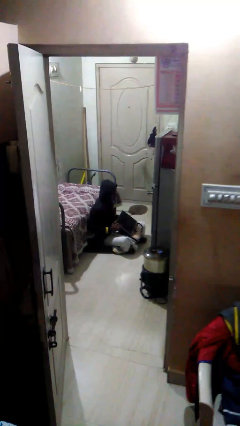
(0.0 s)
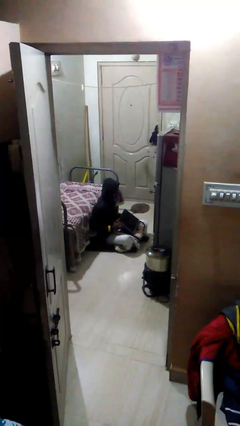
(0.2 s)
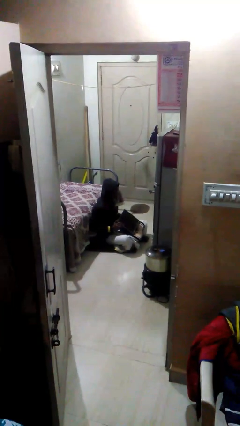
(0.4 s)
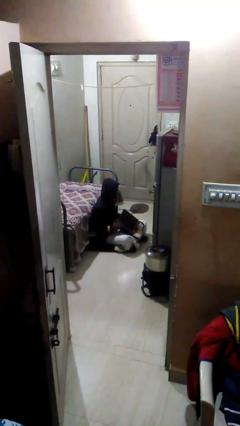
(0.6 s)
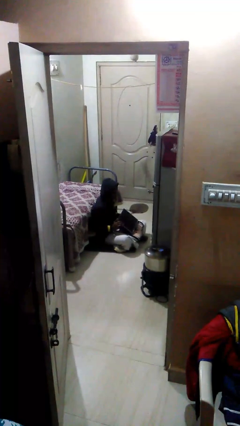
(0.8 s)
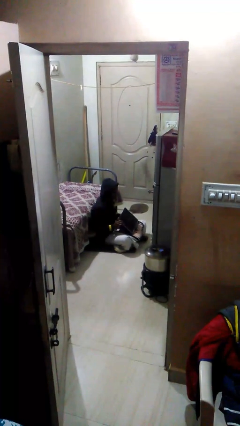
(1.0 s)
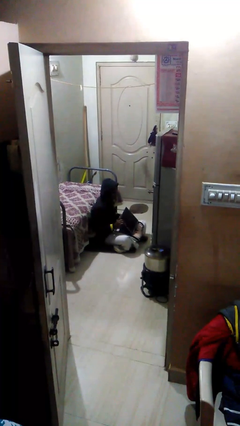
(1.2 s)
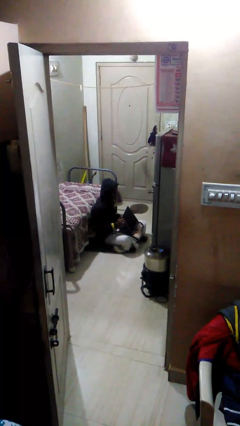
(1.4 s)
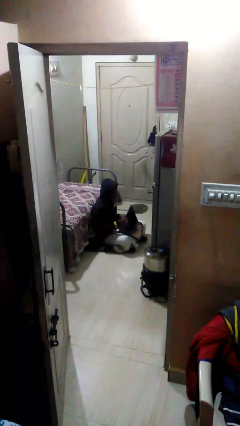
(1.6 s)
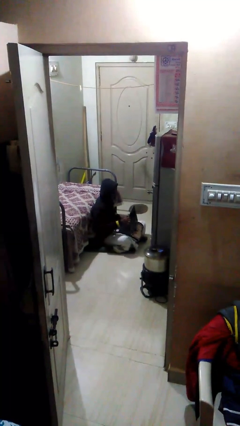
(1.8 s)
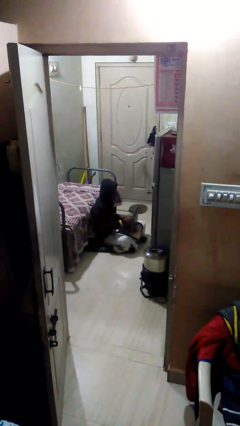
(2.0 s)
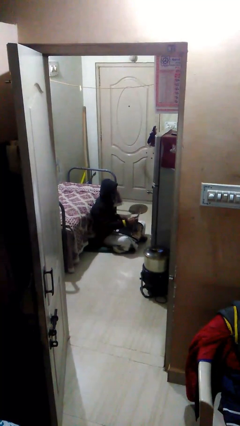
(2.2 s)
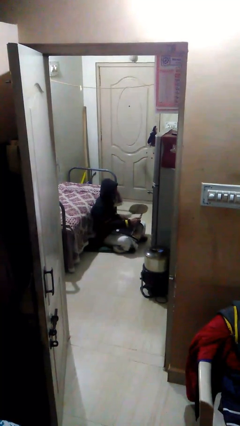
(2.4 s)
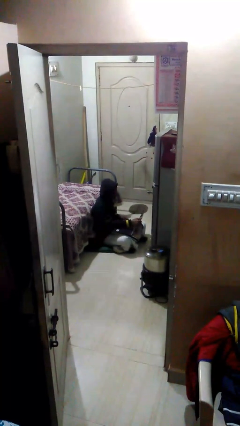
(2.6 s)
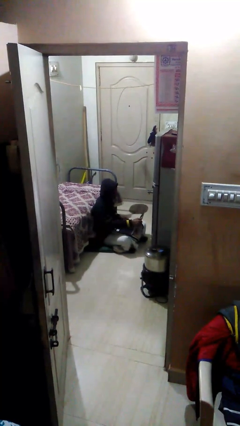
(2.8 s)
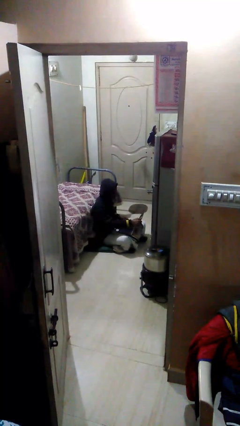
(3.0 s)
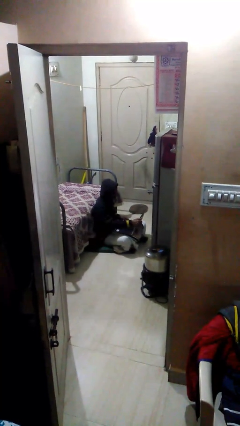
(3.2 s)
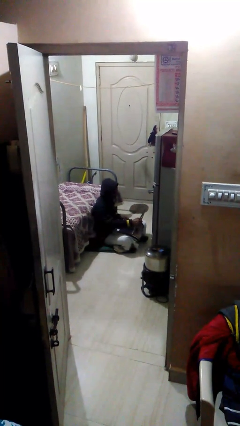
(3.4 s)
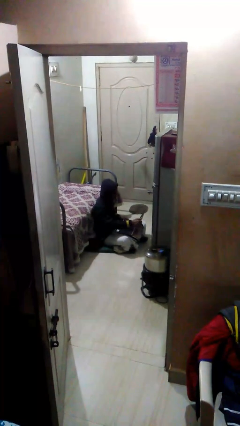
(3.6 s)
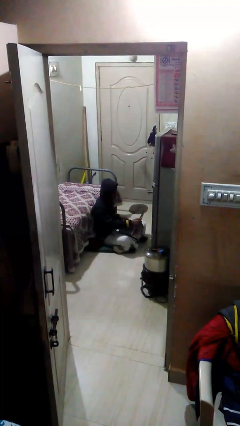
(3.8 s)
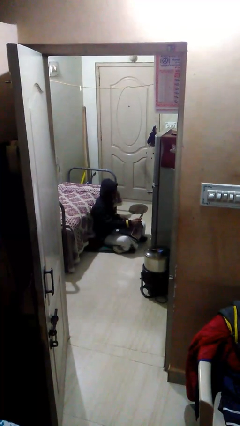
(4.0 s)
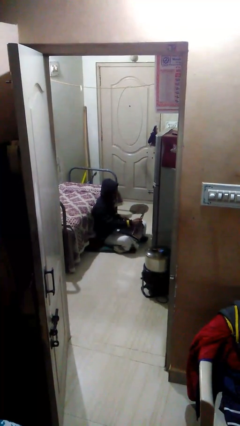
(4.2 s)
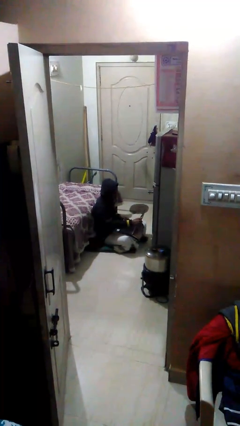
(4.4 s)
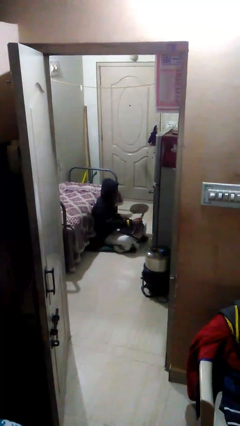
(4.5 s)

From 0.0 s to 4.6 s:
person interacts with laptop

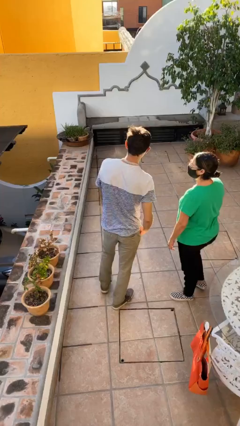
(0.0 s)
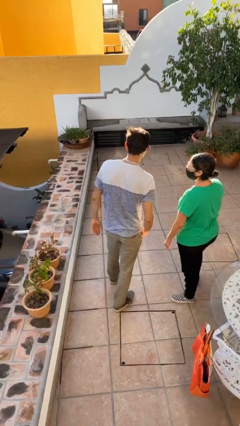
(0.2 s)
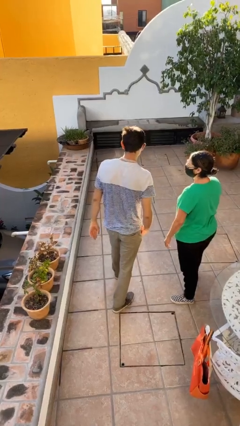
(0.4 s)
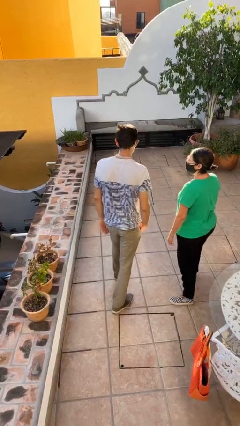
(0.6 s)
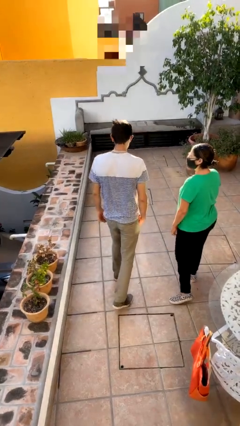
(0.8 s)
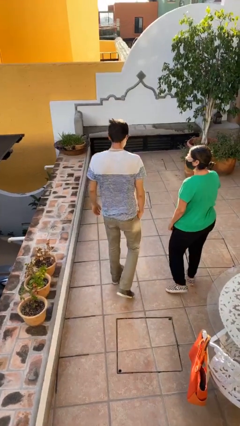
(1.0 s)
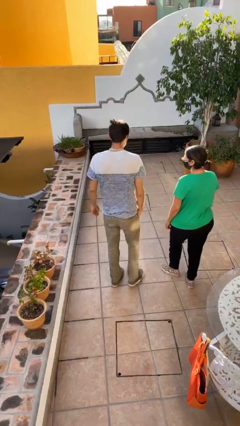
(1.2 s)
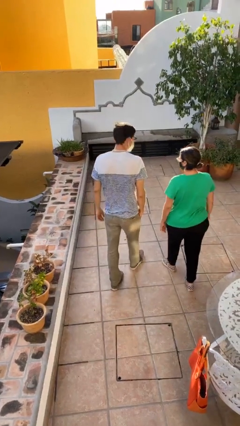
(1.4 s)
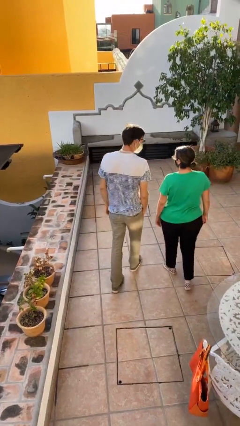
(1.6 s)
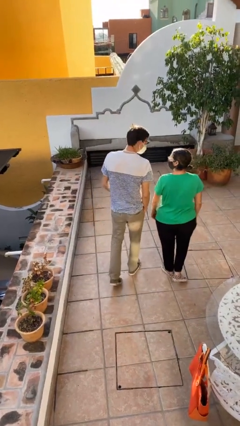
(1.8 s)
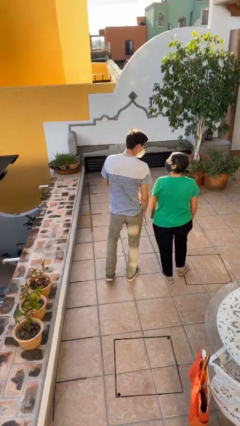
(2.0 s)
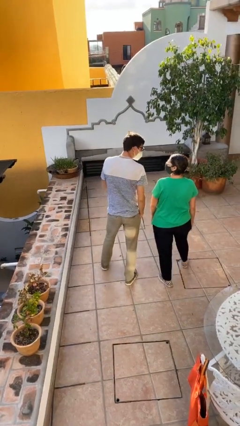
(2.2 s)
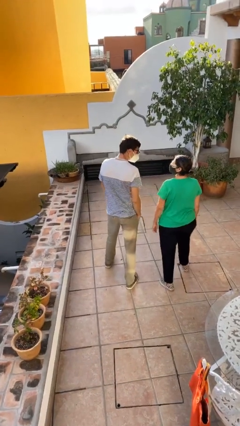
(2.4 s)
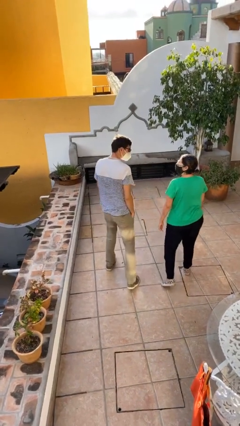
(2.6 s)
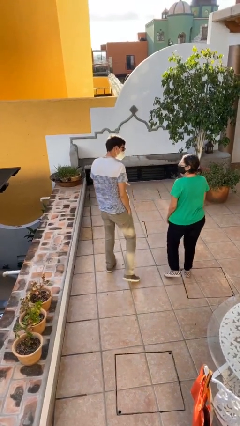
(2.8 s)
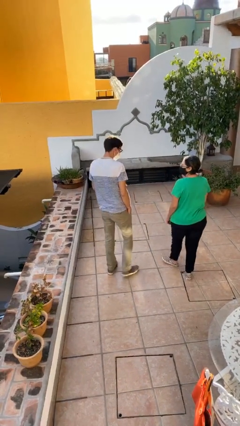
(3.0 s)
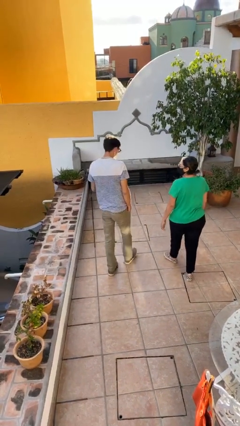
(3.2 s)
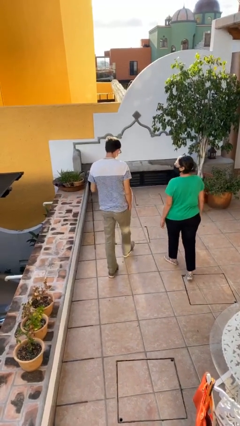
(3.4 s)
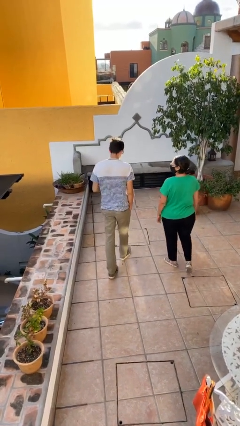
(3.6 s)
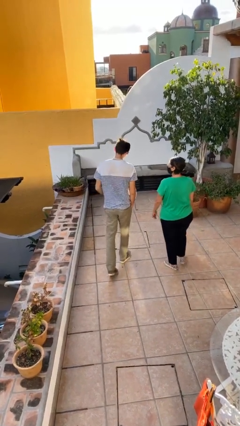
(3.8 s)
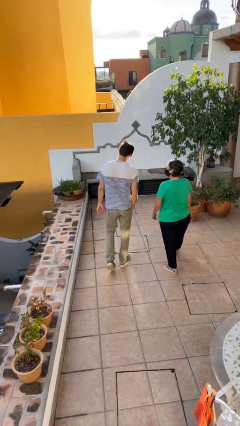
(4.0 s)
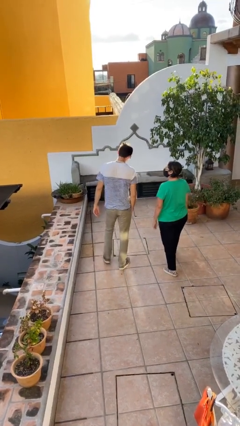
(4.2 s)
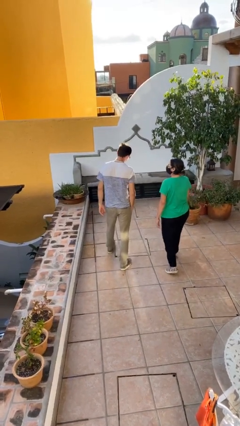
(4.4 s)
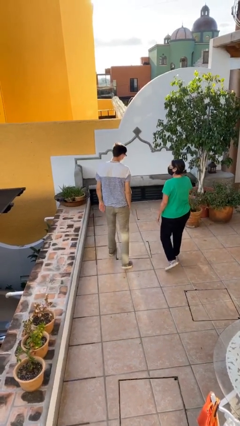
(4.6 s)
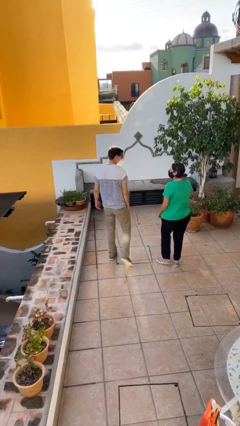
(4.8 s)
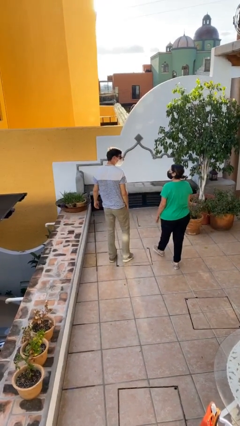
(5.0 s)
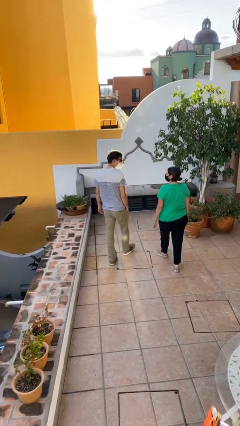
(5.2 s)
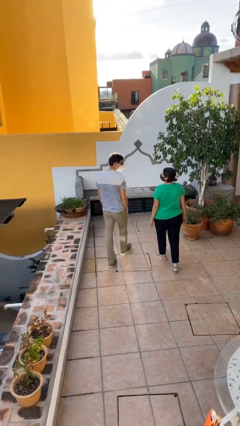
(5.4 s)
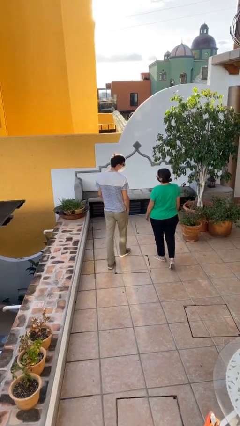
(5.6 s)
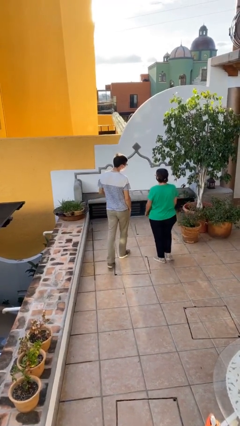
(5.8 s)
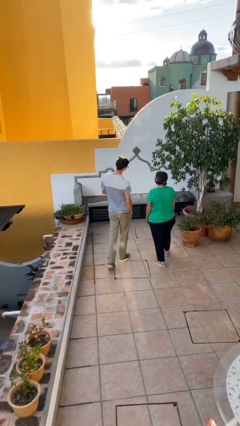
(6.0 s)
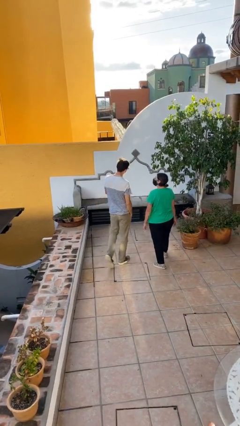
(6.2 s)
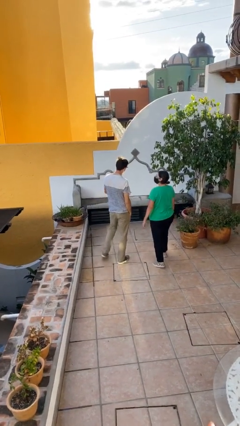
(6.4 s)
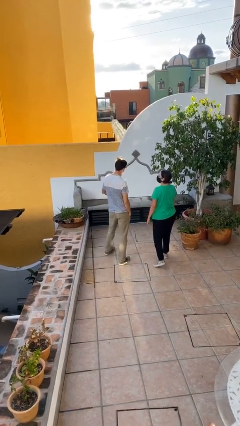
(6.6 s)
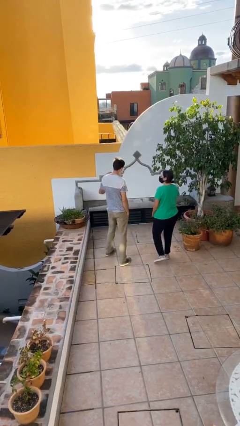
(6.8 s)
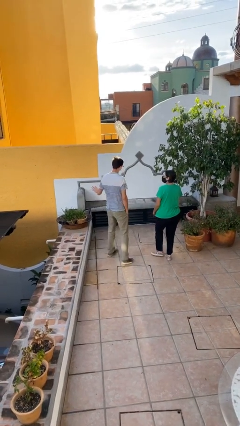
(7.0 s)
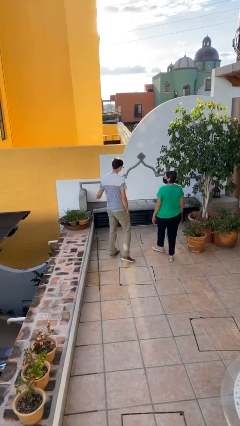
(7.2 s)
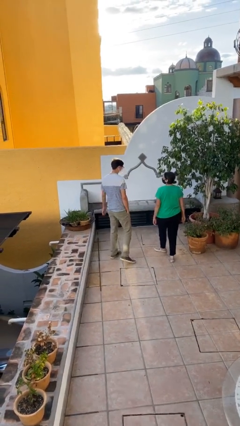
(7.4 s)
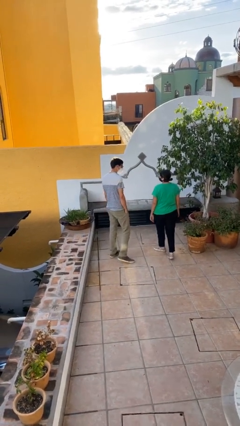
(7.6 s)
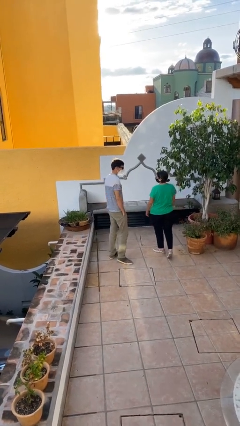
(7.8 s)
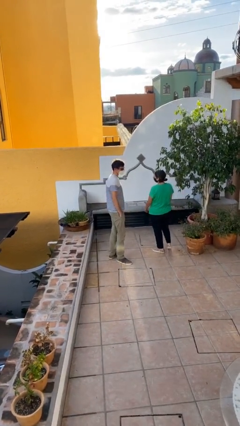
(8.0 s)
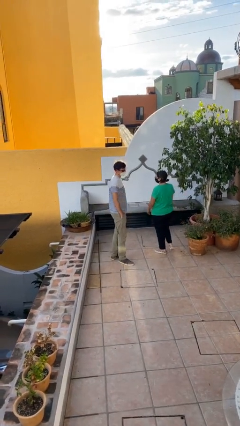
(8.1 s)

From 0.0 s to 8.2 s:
person talks to person

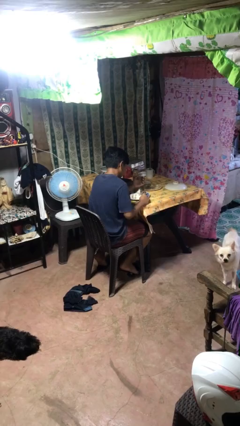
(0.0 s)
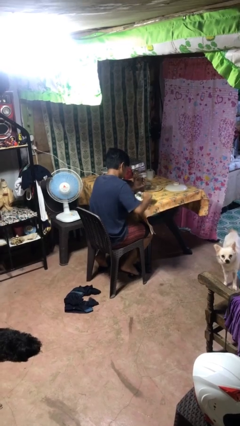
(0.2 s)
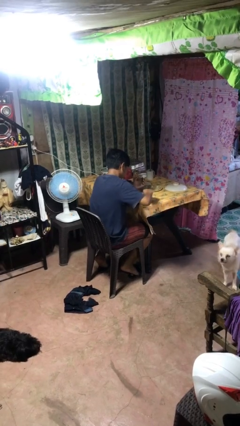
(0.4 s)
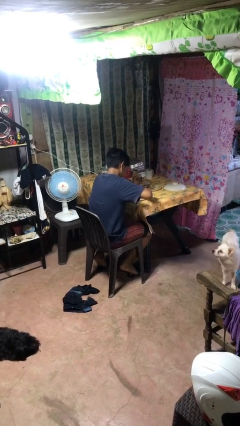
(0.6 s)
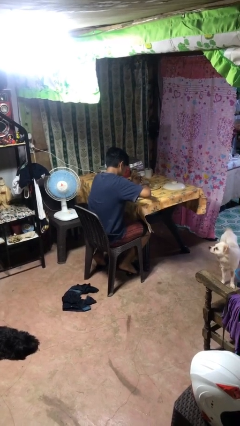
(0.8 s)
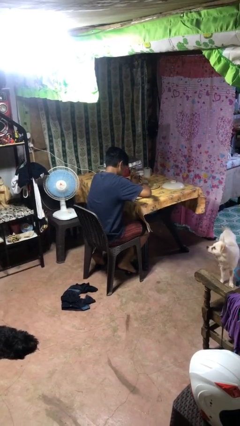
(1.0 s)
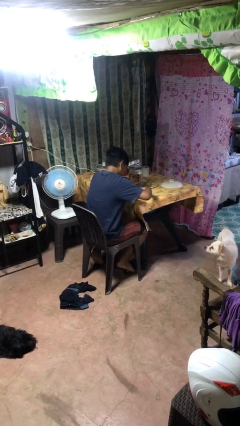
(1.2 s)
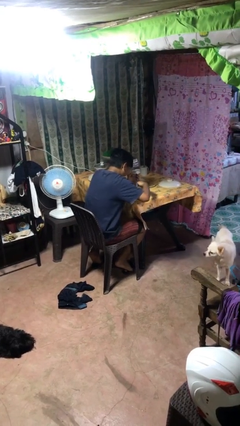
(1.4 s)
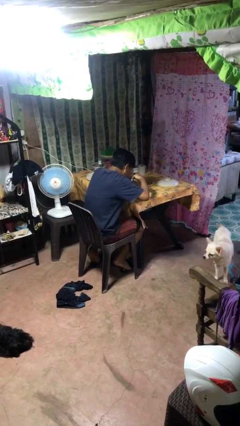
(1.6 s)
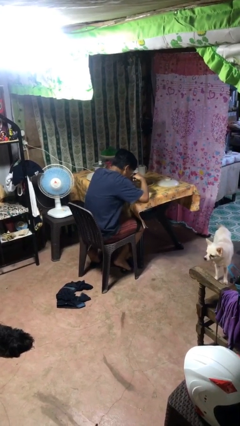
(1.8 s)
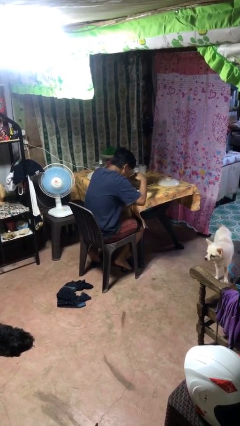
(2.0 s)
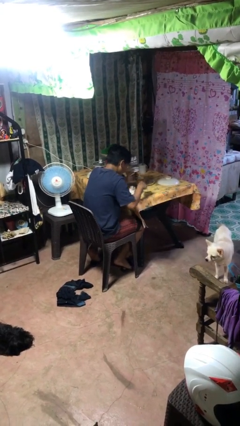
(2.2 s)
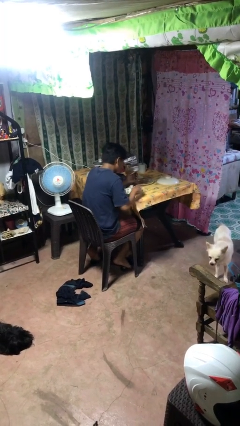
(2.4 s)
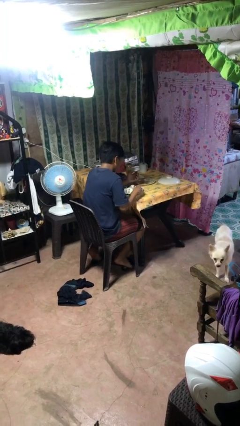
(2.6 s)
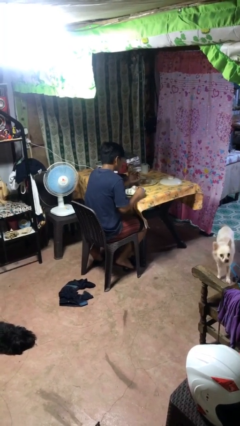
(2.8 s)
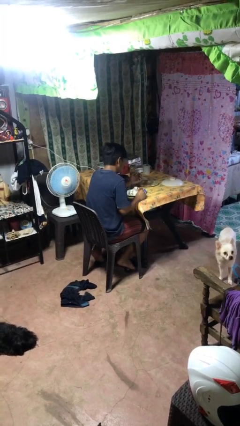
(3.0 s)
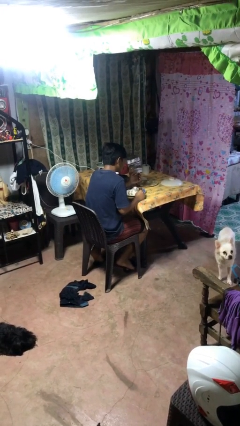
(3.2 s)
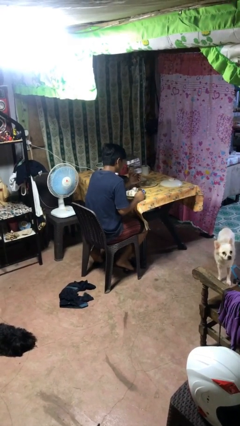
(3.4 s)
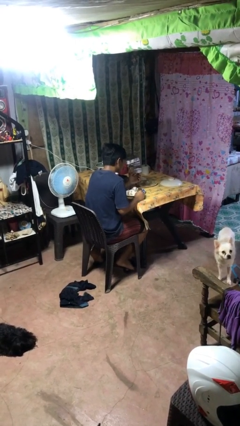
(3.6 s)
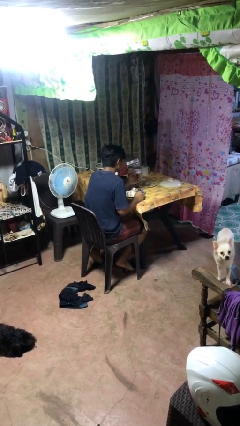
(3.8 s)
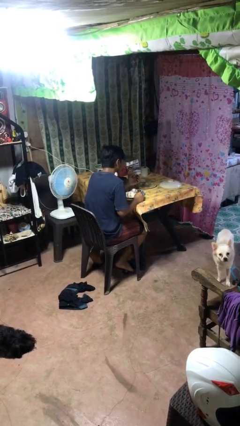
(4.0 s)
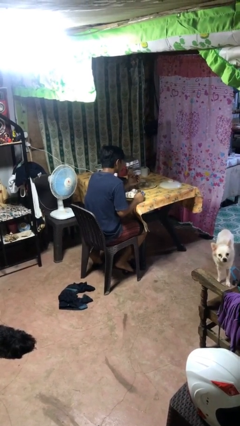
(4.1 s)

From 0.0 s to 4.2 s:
person eats with utensil

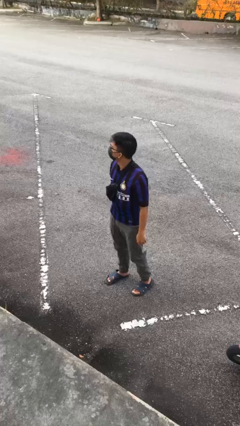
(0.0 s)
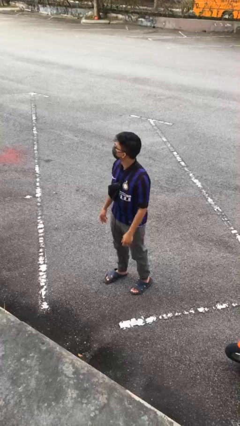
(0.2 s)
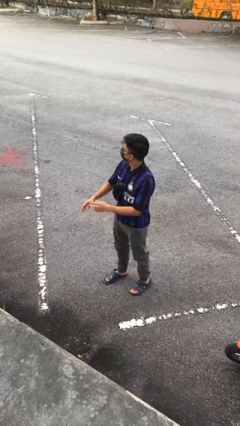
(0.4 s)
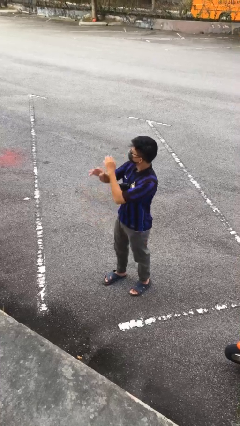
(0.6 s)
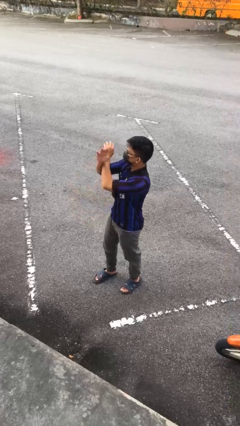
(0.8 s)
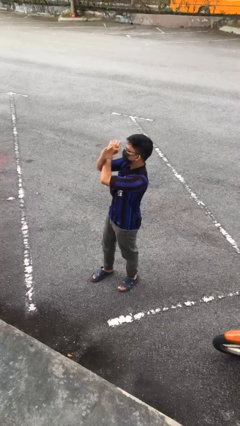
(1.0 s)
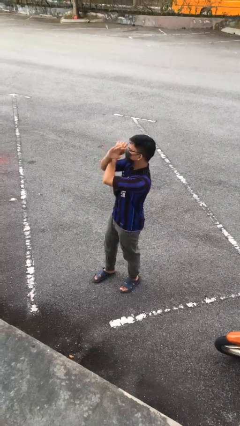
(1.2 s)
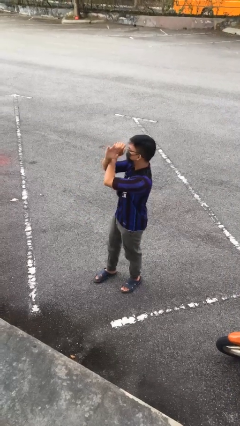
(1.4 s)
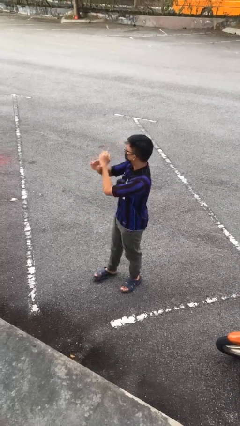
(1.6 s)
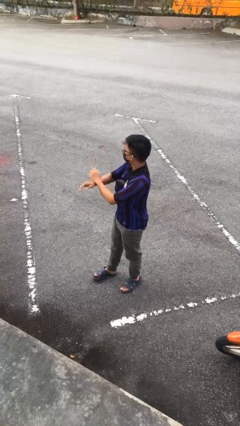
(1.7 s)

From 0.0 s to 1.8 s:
person gestures arms x
